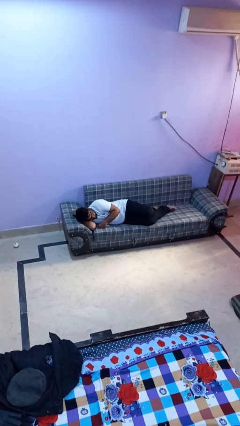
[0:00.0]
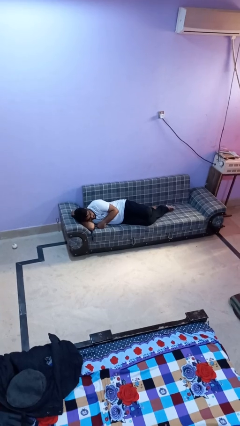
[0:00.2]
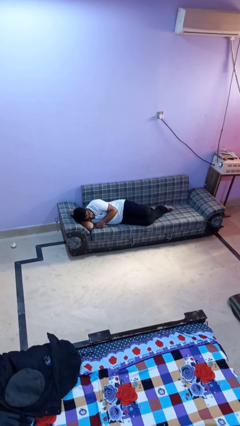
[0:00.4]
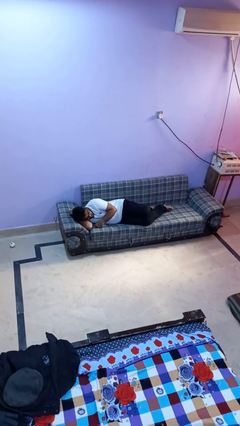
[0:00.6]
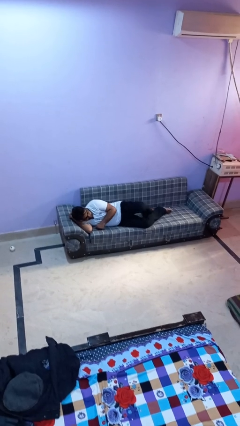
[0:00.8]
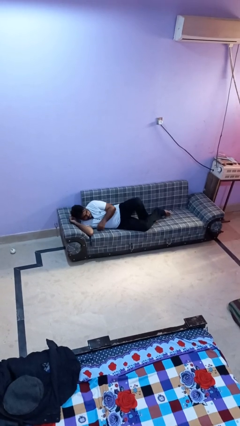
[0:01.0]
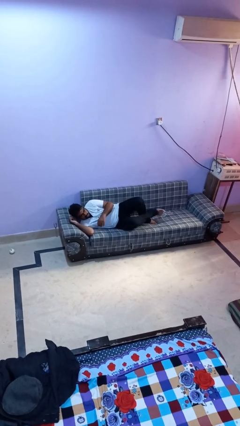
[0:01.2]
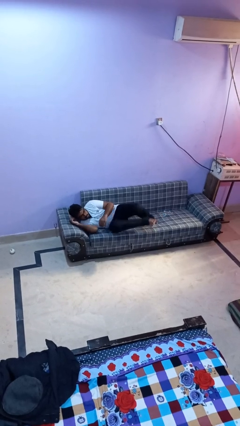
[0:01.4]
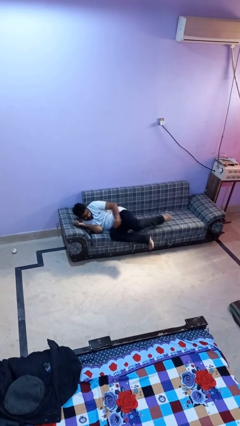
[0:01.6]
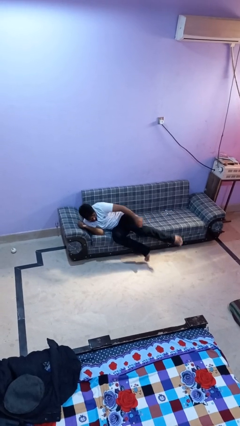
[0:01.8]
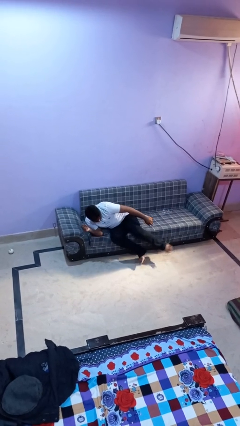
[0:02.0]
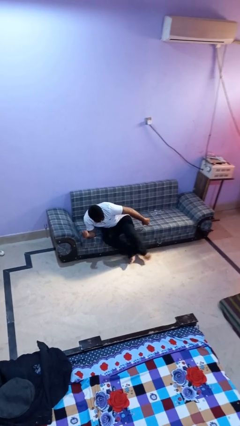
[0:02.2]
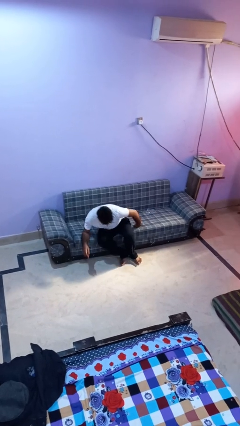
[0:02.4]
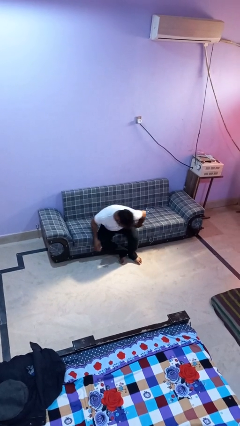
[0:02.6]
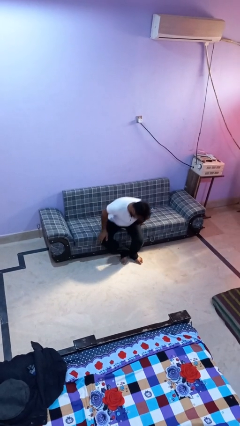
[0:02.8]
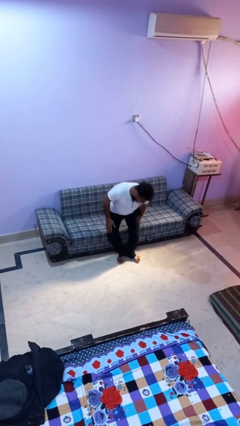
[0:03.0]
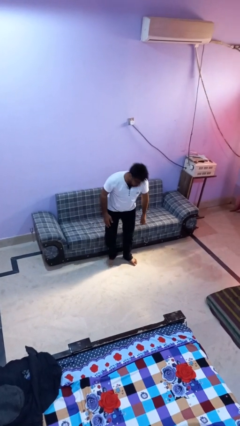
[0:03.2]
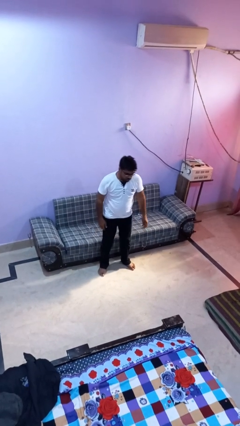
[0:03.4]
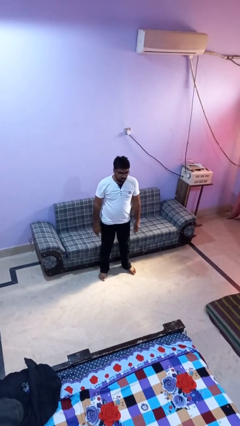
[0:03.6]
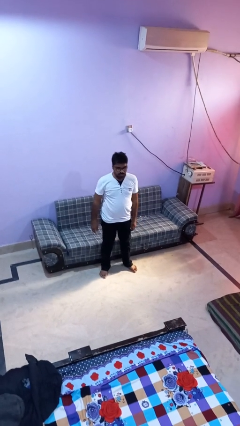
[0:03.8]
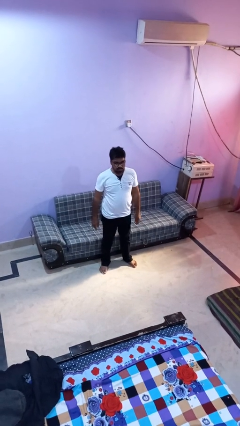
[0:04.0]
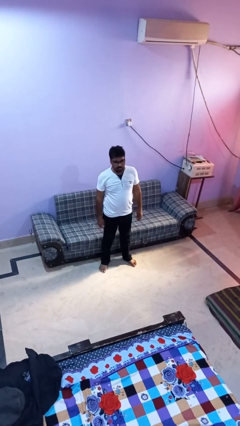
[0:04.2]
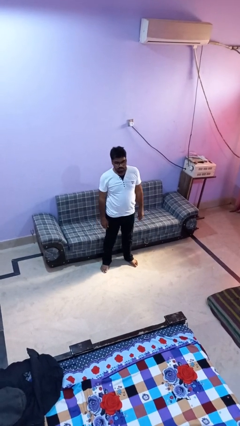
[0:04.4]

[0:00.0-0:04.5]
person stands up

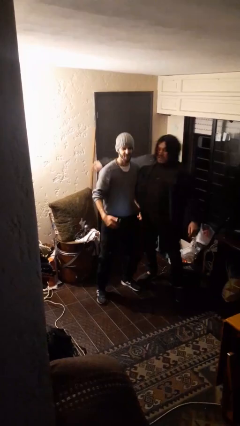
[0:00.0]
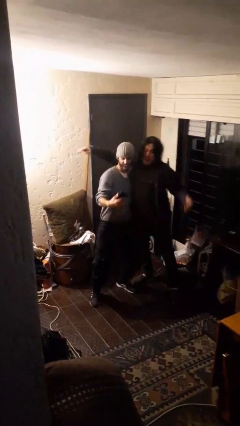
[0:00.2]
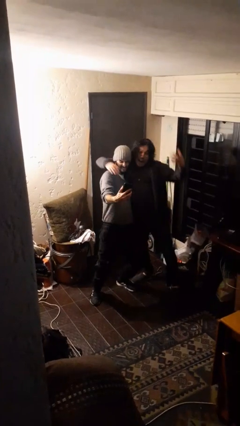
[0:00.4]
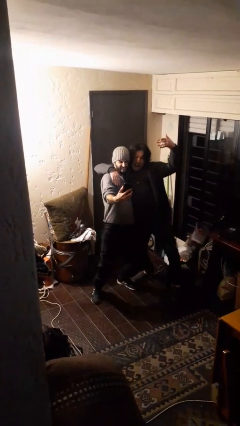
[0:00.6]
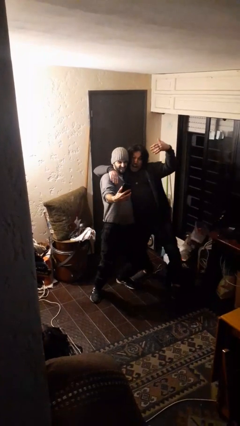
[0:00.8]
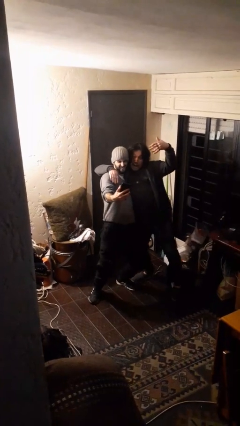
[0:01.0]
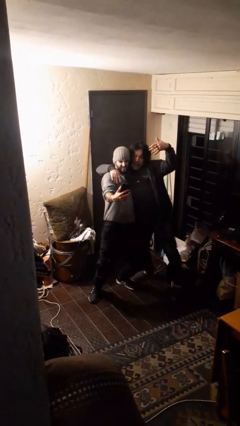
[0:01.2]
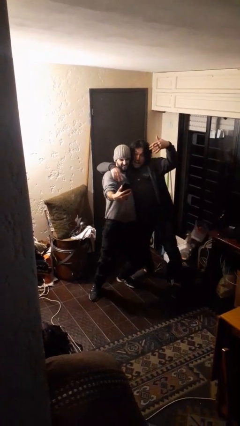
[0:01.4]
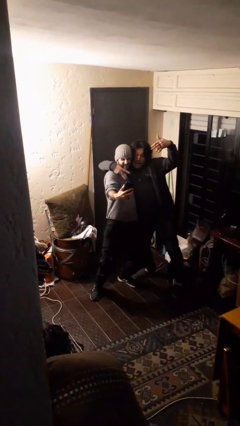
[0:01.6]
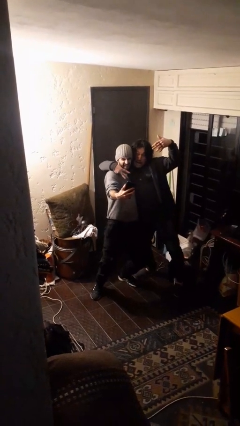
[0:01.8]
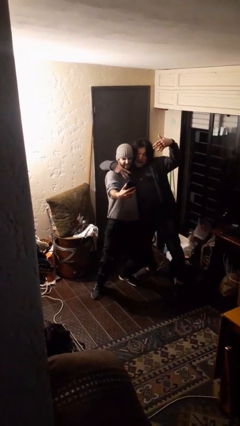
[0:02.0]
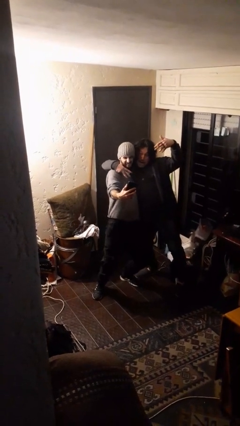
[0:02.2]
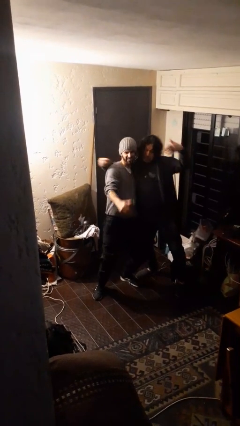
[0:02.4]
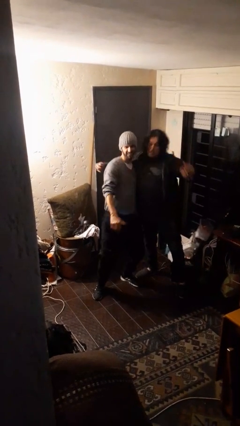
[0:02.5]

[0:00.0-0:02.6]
person takes selfie with person

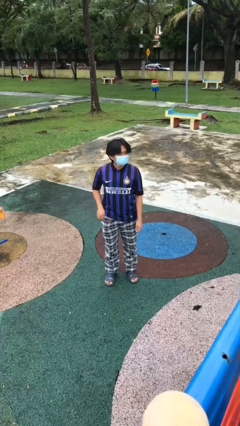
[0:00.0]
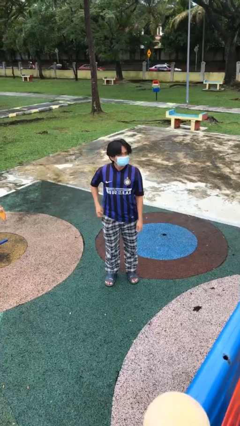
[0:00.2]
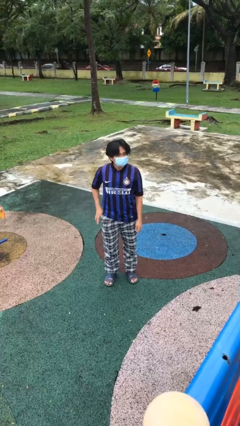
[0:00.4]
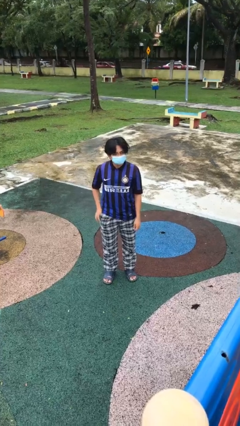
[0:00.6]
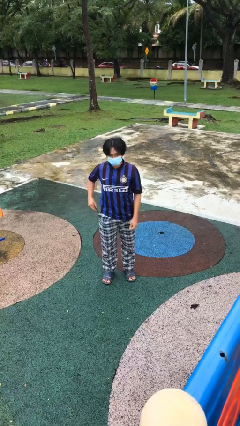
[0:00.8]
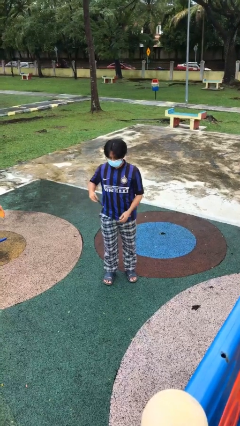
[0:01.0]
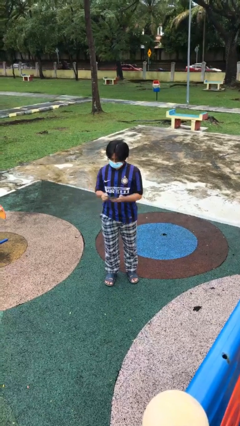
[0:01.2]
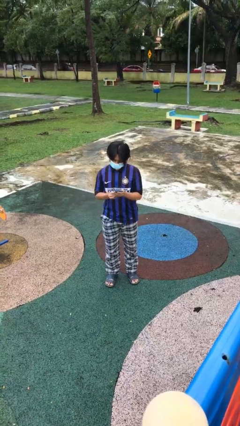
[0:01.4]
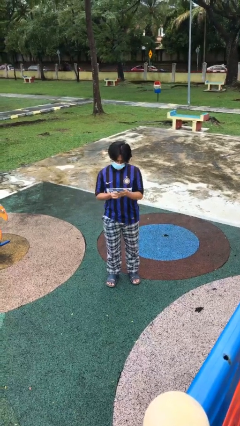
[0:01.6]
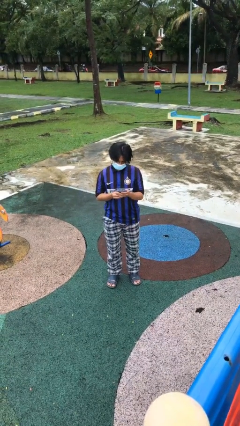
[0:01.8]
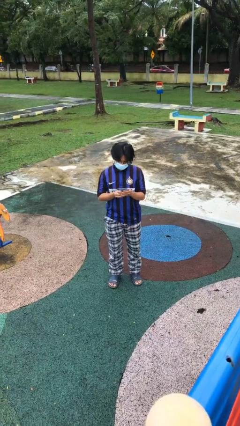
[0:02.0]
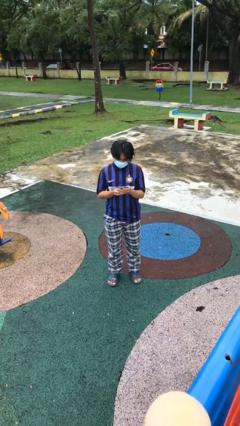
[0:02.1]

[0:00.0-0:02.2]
person takes phone from pocket

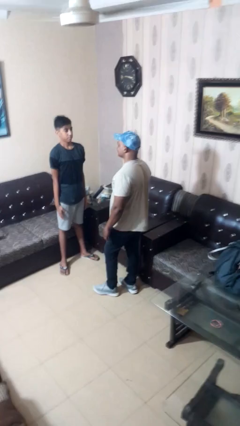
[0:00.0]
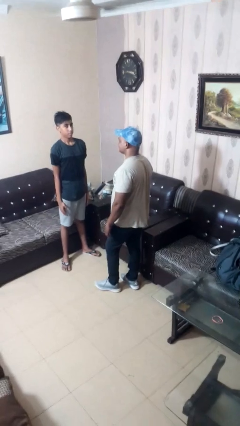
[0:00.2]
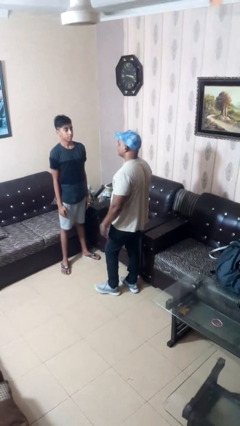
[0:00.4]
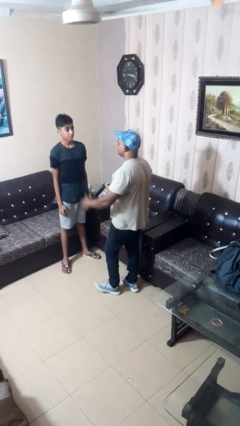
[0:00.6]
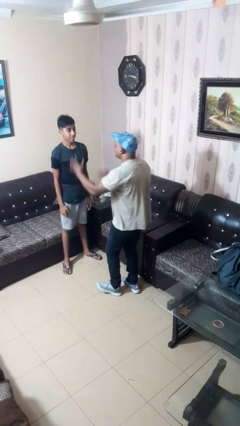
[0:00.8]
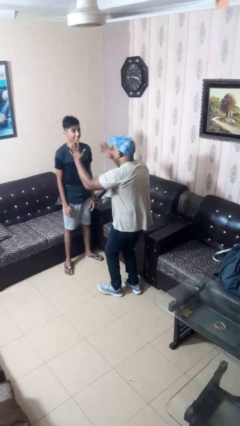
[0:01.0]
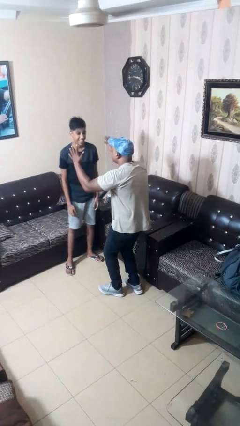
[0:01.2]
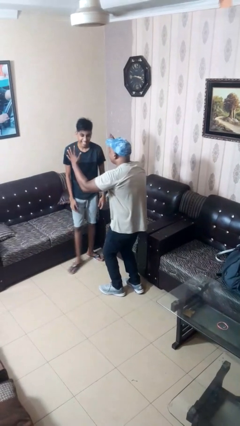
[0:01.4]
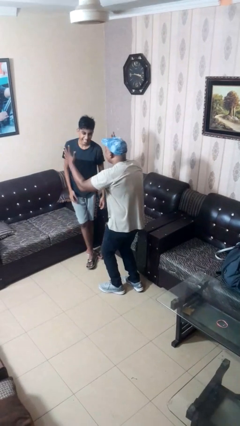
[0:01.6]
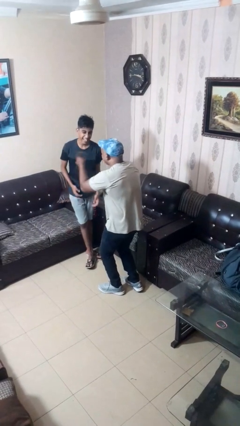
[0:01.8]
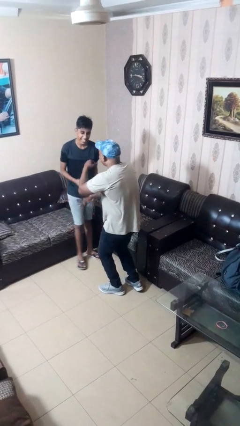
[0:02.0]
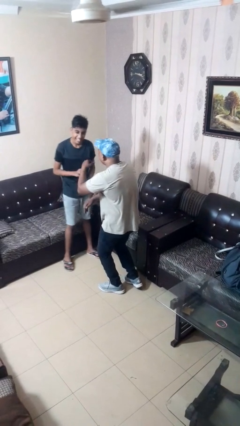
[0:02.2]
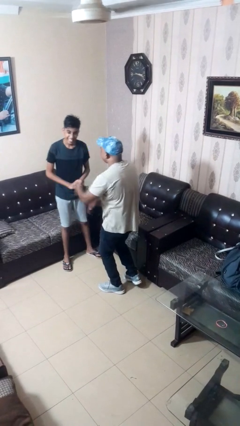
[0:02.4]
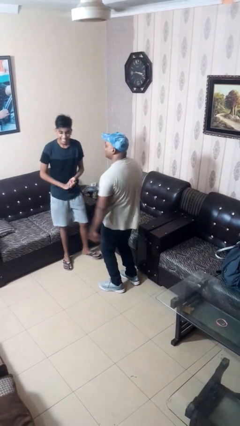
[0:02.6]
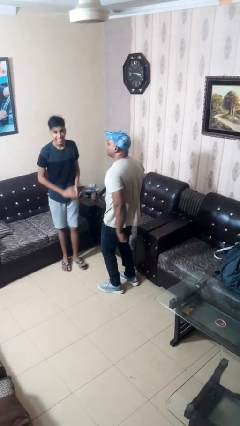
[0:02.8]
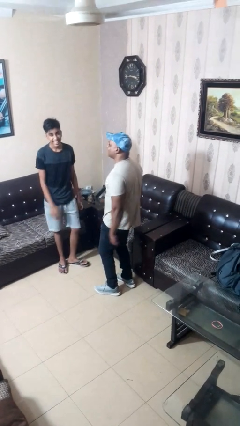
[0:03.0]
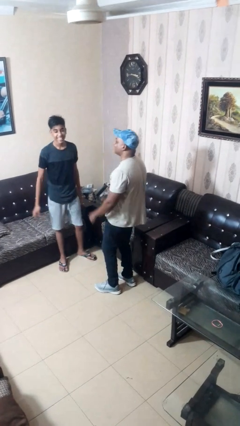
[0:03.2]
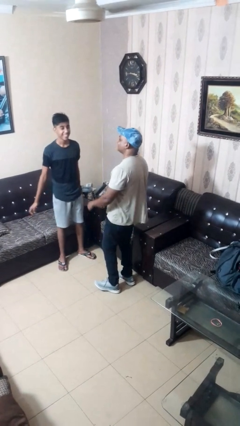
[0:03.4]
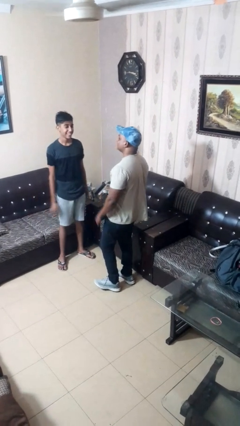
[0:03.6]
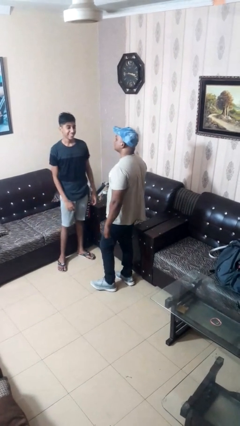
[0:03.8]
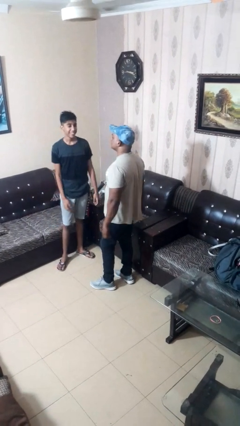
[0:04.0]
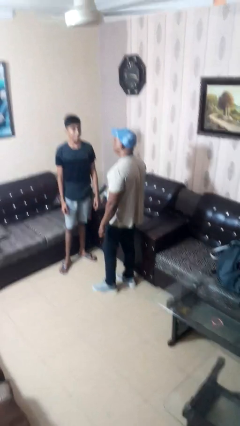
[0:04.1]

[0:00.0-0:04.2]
person laughs with person

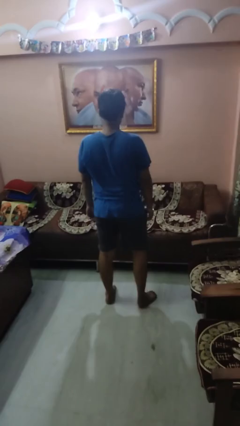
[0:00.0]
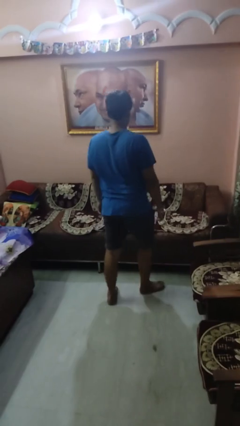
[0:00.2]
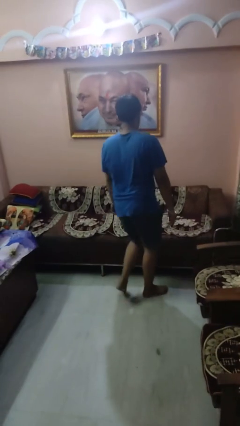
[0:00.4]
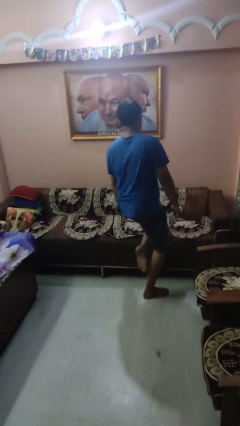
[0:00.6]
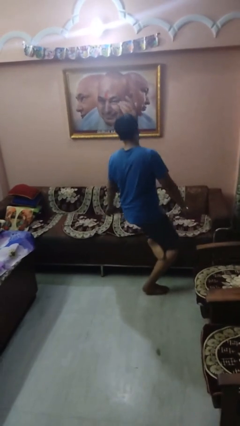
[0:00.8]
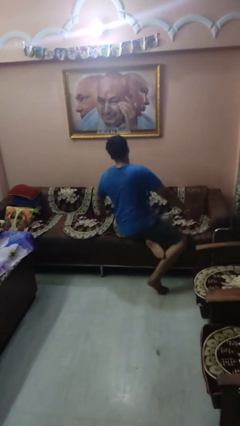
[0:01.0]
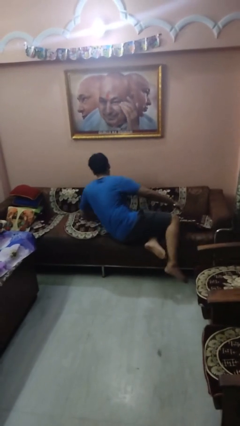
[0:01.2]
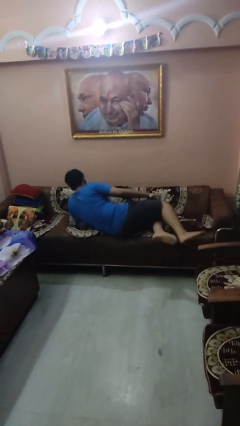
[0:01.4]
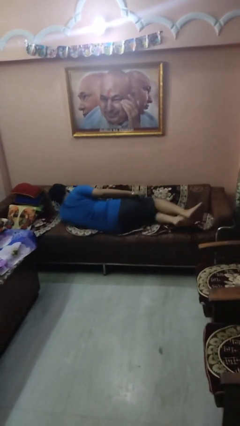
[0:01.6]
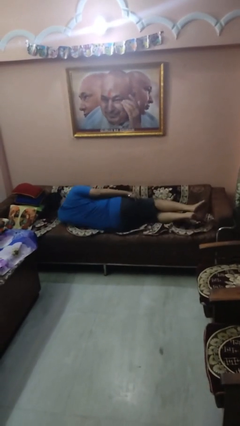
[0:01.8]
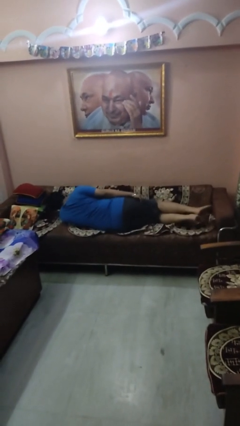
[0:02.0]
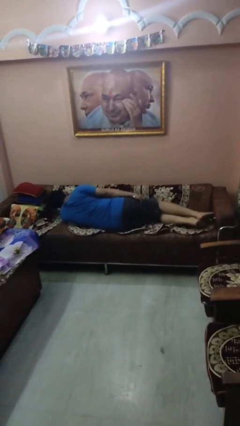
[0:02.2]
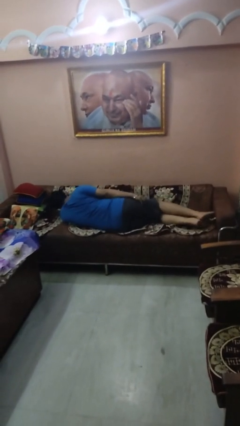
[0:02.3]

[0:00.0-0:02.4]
person lies down on couch

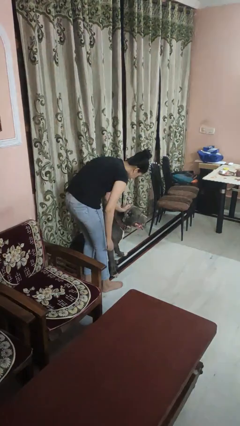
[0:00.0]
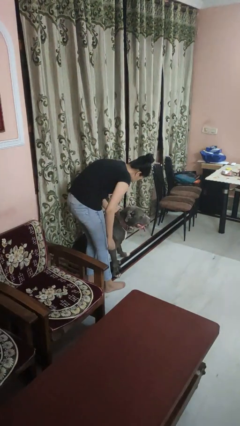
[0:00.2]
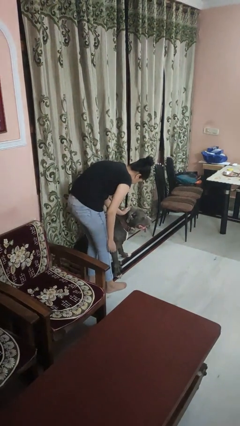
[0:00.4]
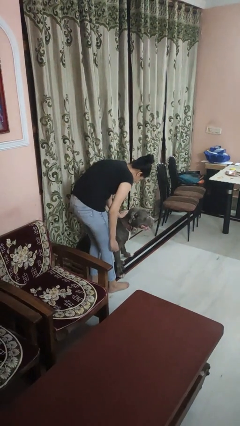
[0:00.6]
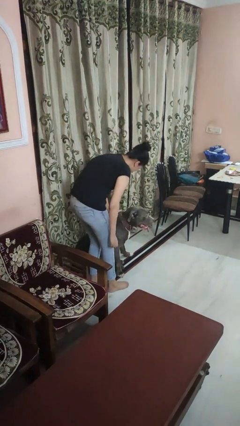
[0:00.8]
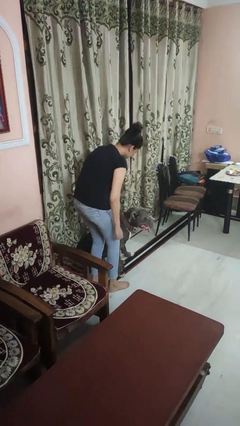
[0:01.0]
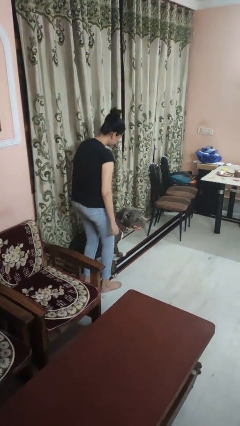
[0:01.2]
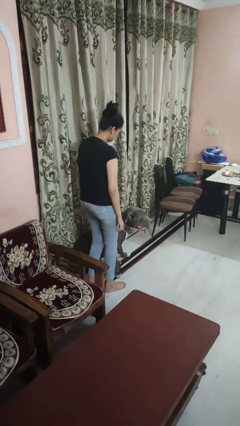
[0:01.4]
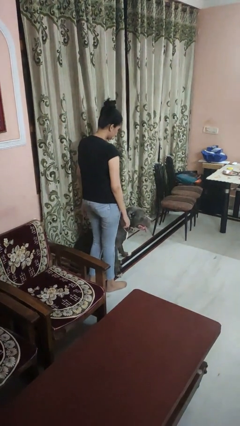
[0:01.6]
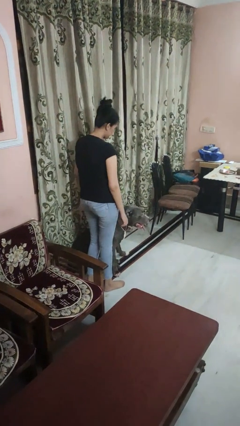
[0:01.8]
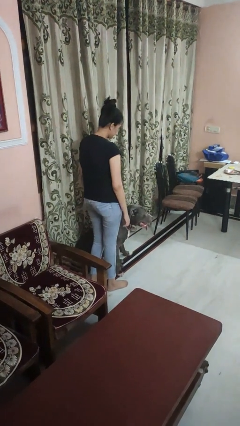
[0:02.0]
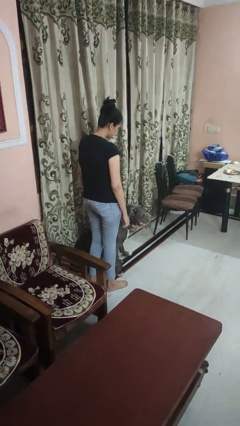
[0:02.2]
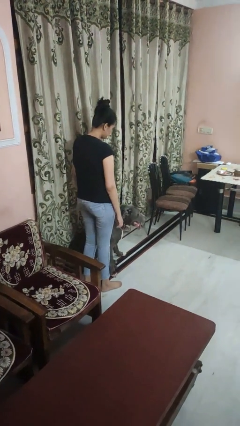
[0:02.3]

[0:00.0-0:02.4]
person pets dog
